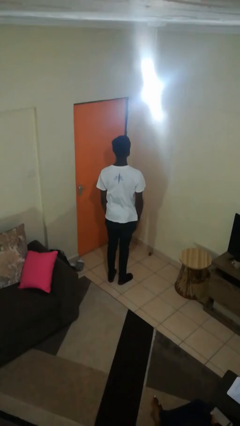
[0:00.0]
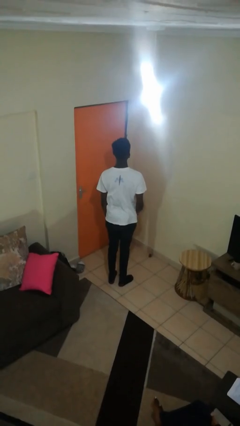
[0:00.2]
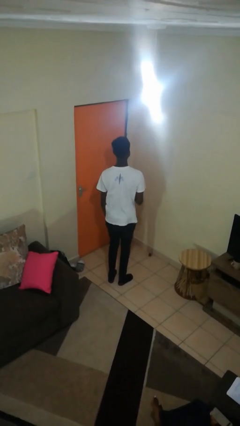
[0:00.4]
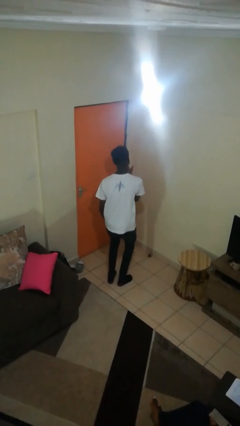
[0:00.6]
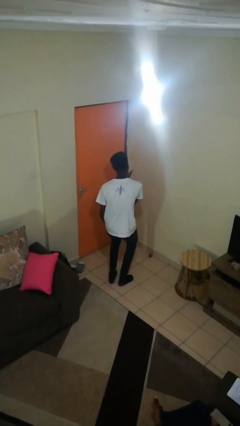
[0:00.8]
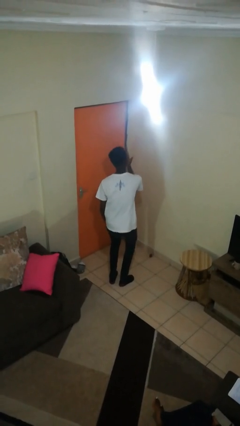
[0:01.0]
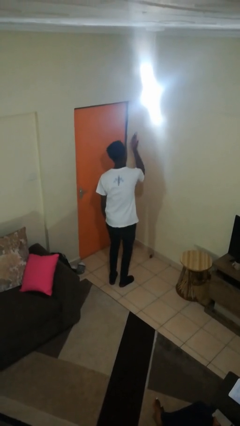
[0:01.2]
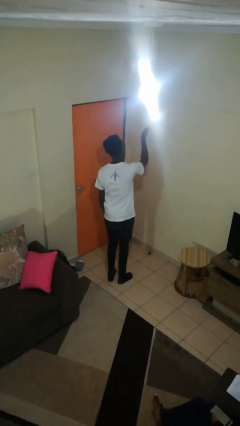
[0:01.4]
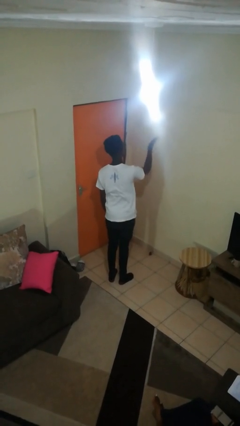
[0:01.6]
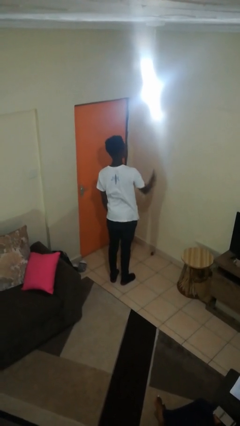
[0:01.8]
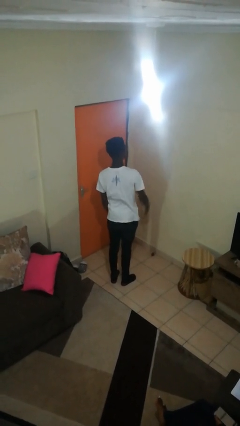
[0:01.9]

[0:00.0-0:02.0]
person gestures blow kiss

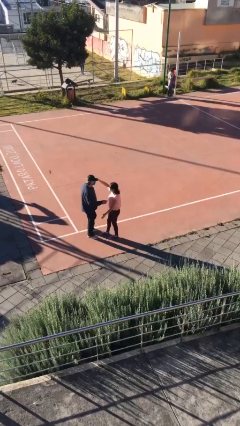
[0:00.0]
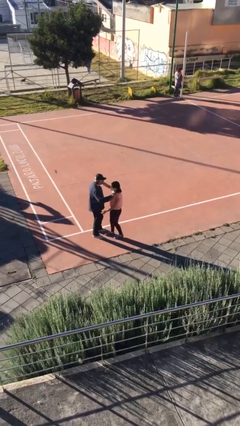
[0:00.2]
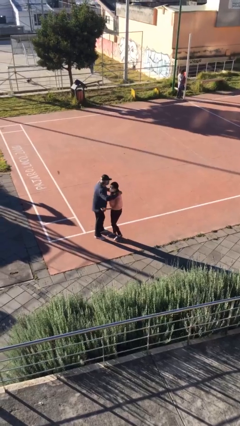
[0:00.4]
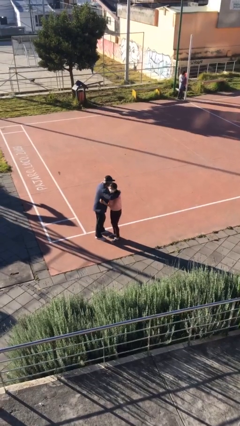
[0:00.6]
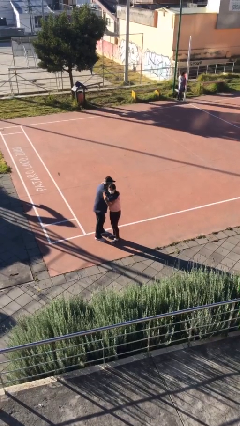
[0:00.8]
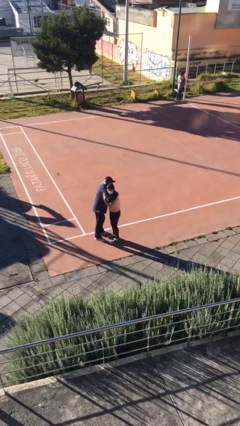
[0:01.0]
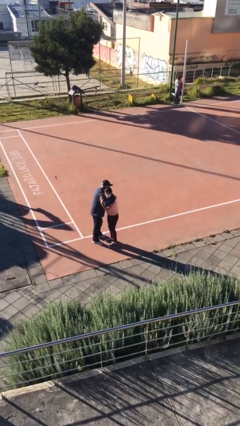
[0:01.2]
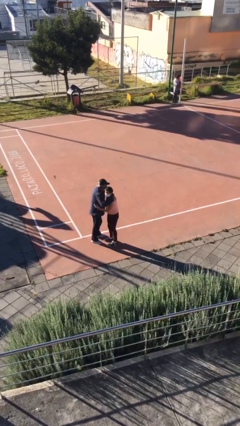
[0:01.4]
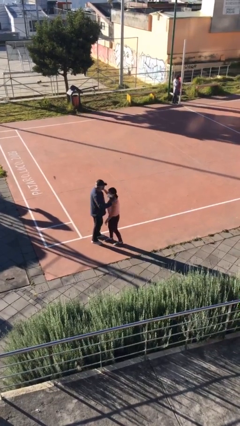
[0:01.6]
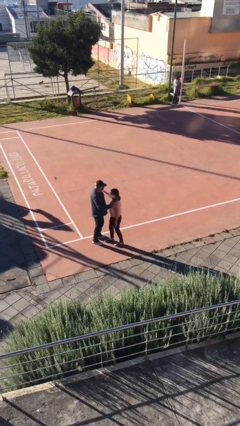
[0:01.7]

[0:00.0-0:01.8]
person embraces person

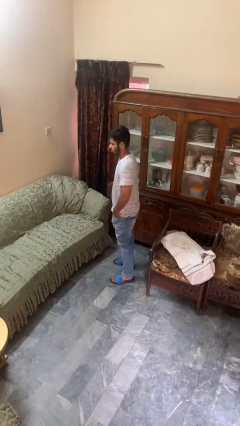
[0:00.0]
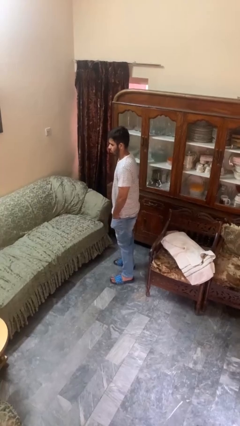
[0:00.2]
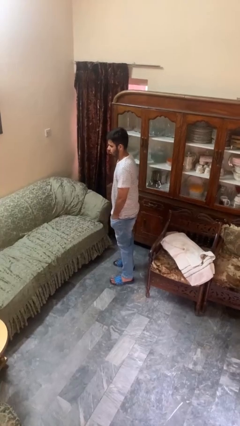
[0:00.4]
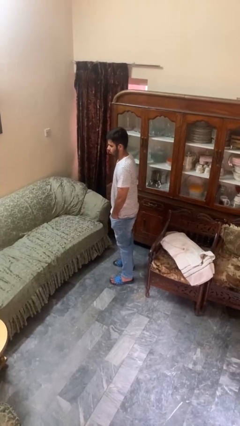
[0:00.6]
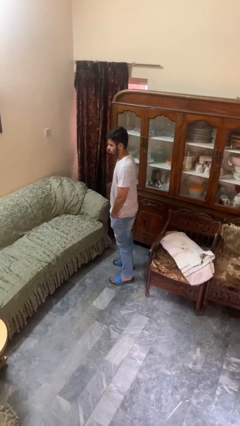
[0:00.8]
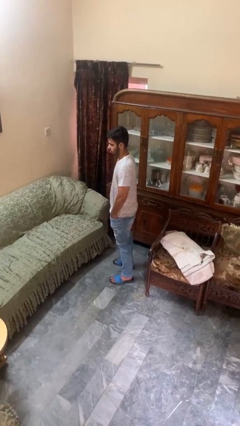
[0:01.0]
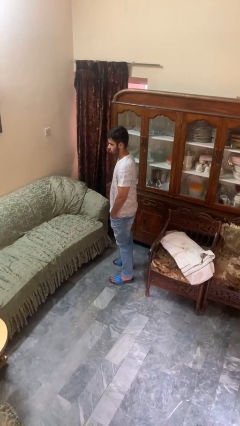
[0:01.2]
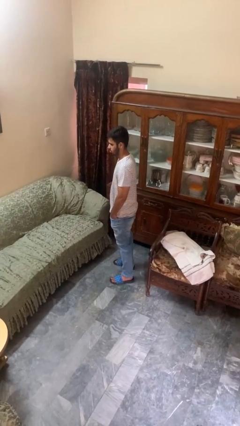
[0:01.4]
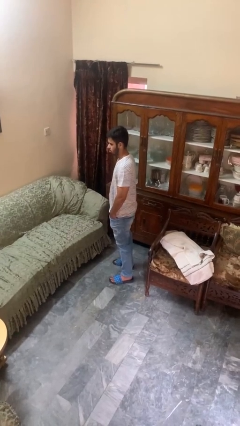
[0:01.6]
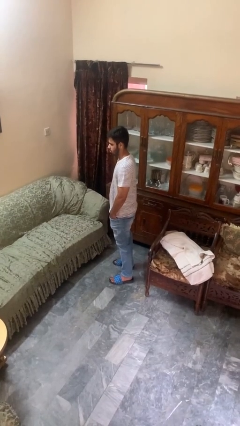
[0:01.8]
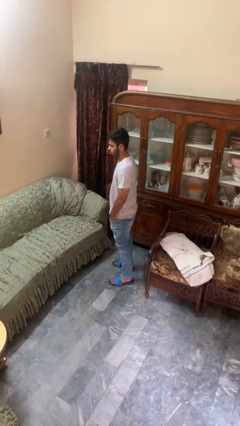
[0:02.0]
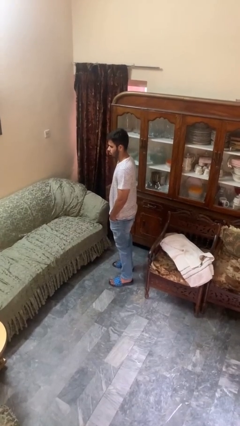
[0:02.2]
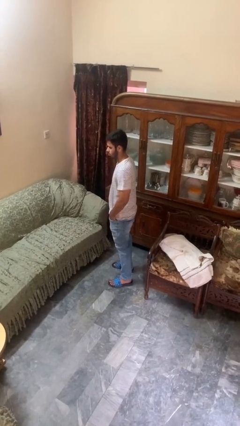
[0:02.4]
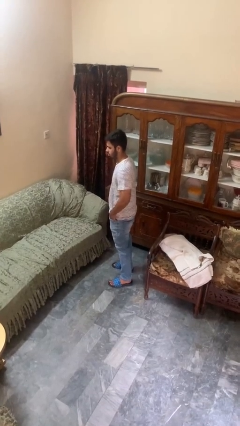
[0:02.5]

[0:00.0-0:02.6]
person puts hands in back pockets

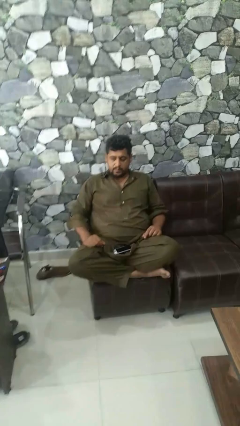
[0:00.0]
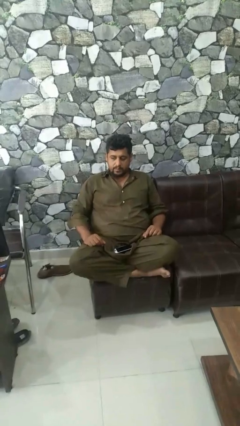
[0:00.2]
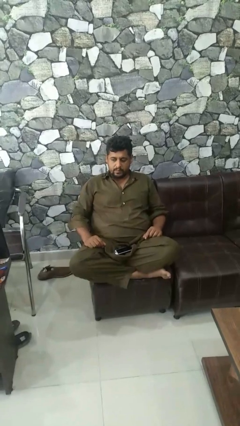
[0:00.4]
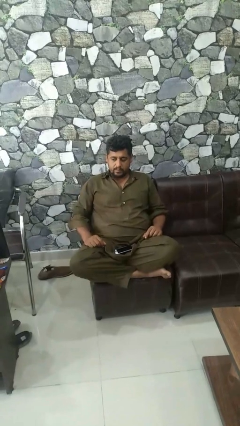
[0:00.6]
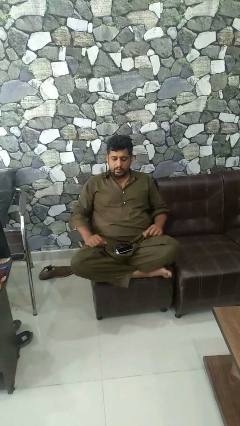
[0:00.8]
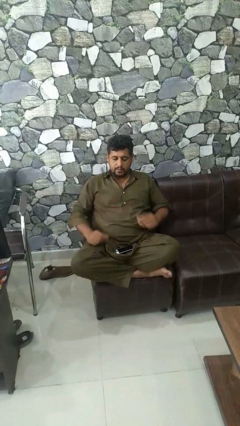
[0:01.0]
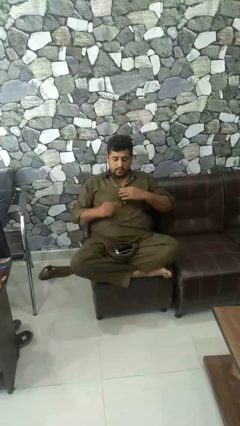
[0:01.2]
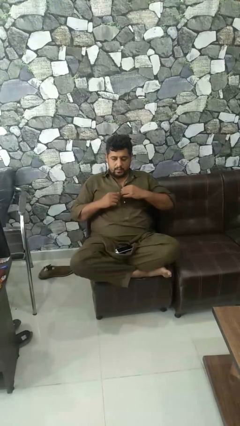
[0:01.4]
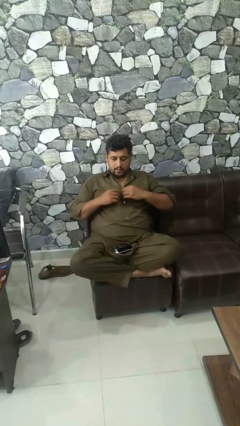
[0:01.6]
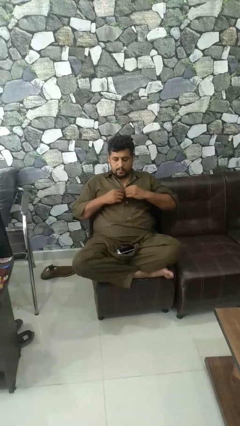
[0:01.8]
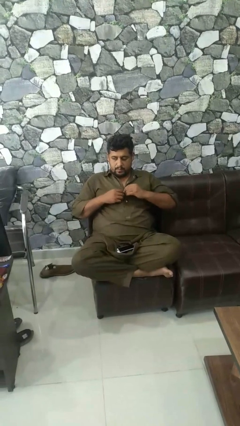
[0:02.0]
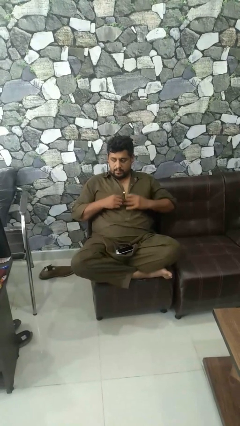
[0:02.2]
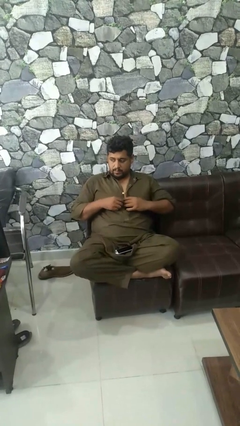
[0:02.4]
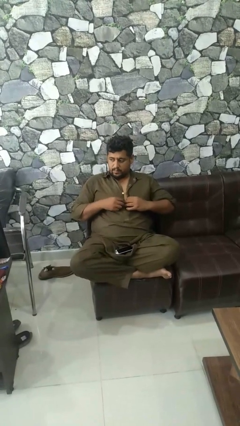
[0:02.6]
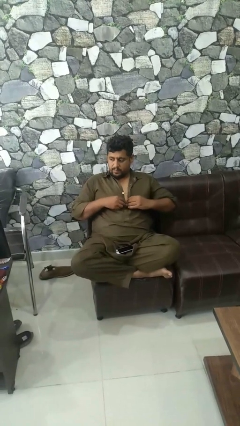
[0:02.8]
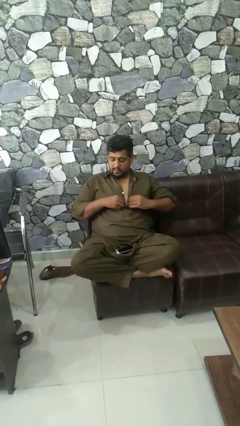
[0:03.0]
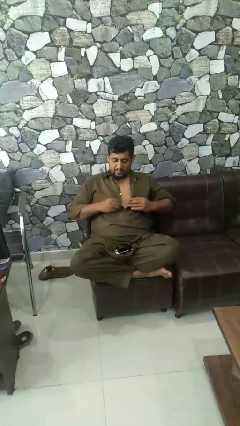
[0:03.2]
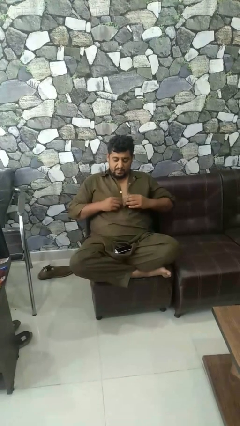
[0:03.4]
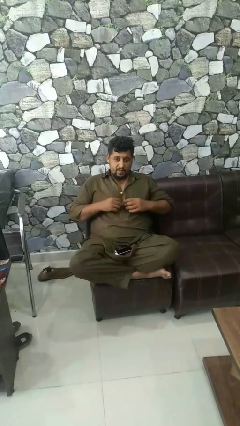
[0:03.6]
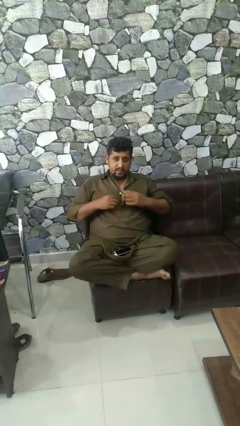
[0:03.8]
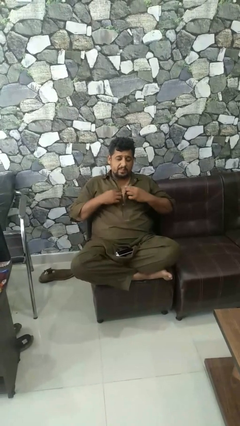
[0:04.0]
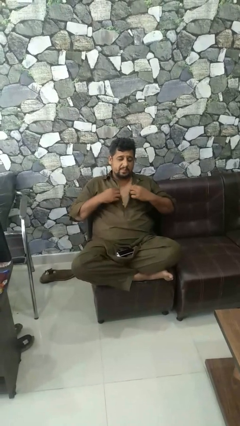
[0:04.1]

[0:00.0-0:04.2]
person unbuttons shirt

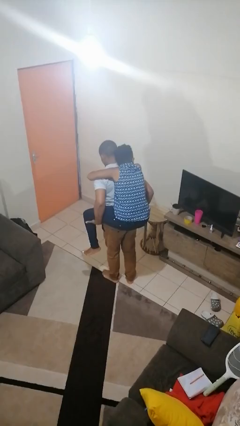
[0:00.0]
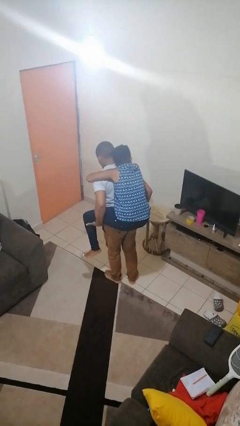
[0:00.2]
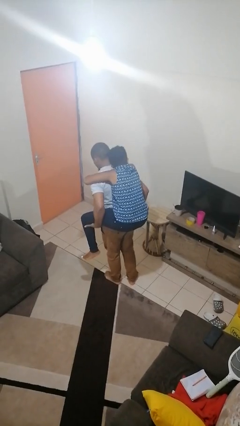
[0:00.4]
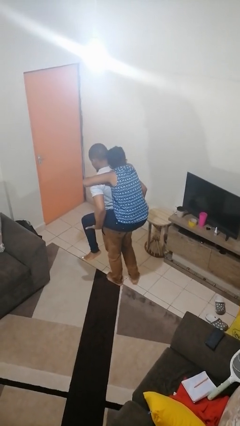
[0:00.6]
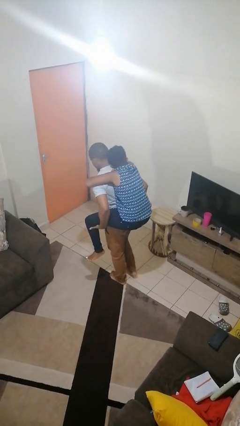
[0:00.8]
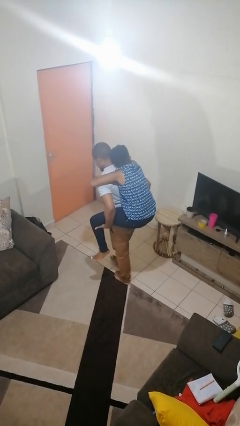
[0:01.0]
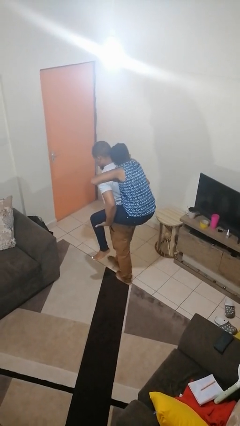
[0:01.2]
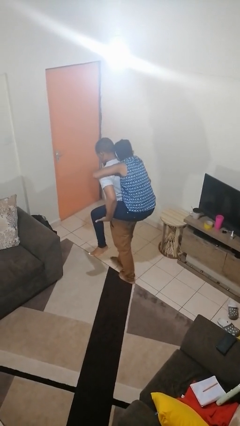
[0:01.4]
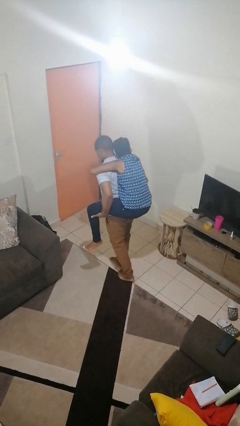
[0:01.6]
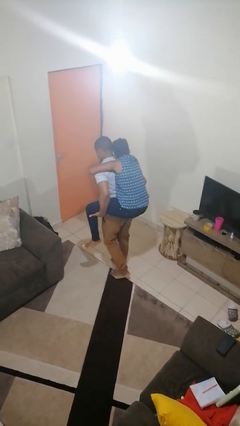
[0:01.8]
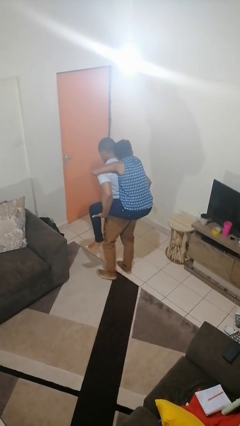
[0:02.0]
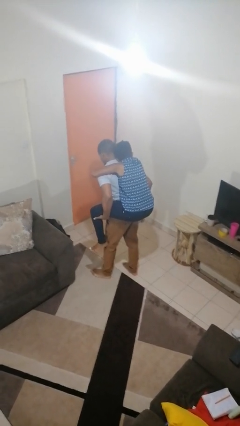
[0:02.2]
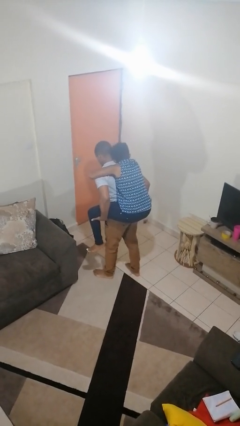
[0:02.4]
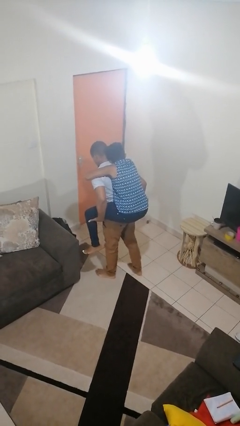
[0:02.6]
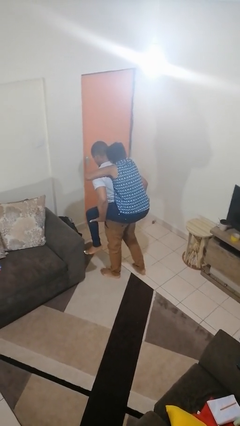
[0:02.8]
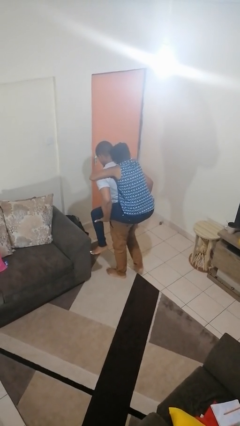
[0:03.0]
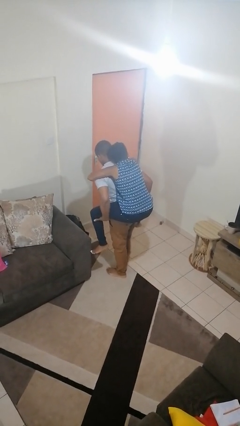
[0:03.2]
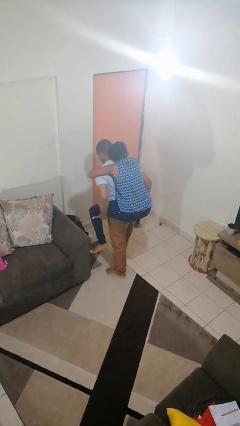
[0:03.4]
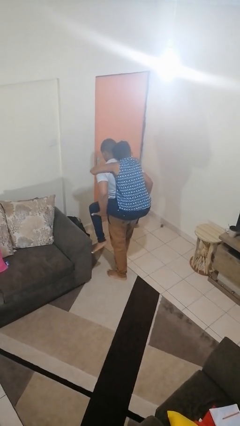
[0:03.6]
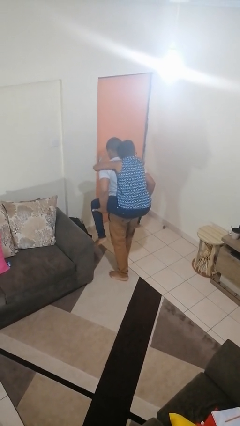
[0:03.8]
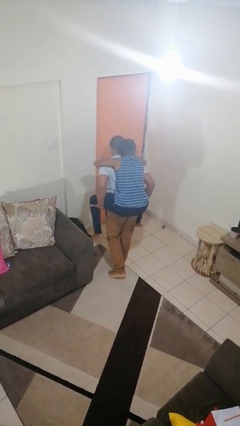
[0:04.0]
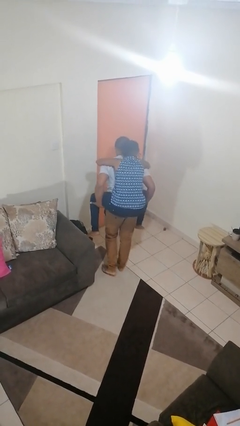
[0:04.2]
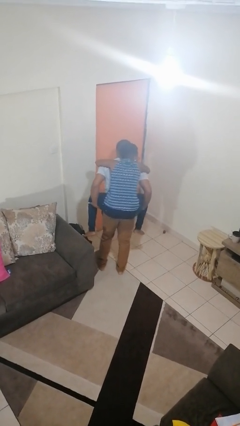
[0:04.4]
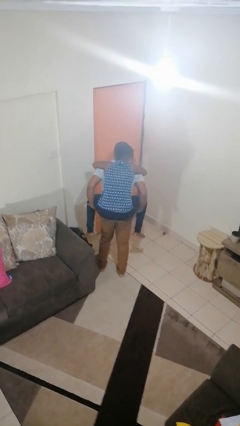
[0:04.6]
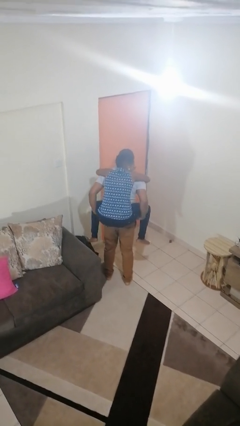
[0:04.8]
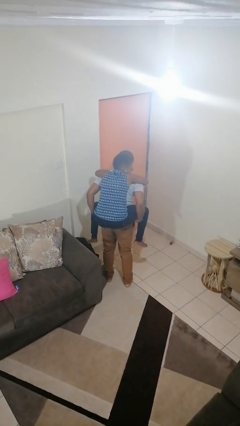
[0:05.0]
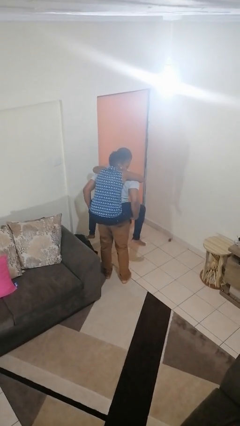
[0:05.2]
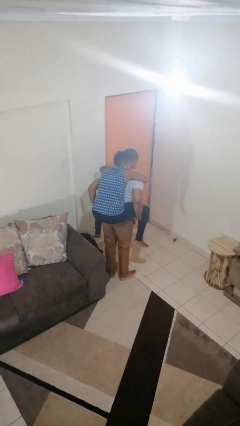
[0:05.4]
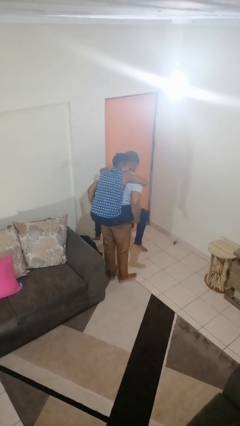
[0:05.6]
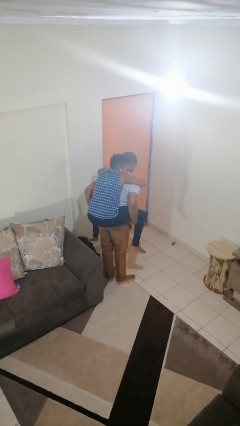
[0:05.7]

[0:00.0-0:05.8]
person carries person on back

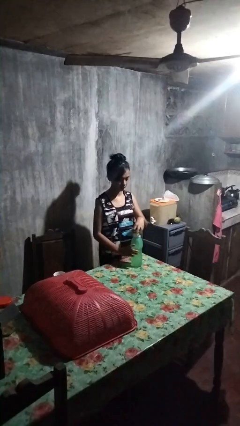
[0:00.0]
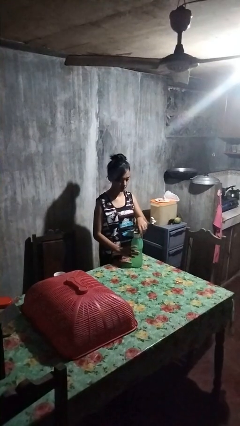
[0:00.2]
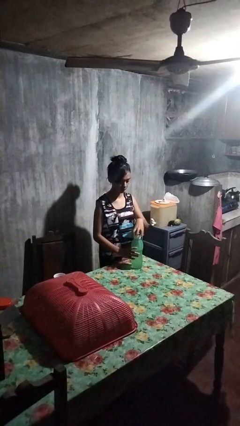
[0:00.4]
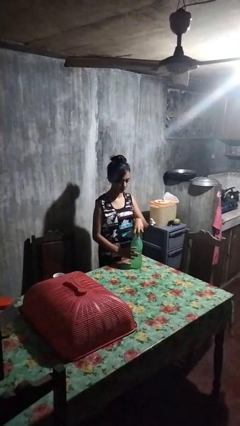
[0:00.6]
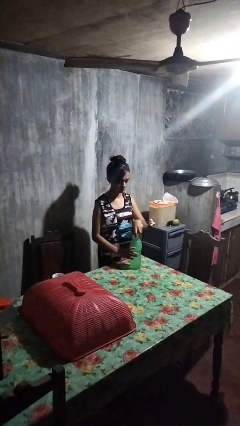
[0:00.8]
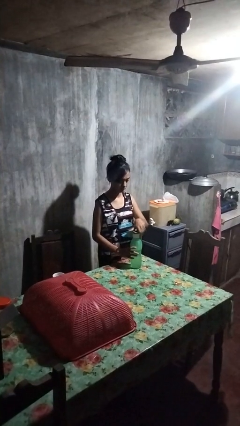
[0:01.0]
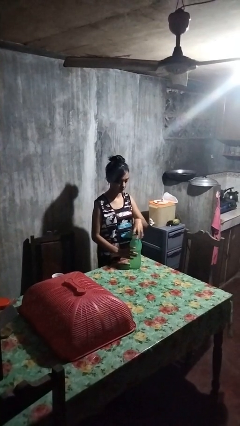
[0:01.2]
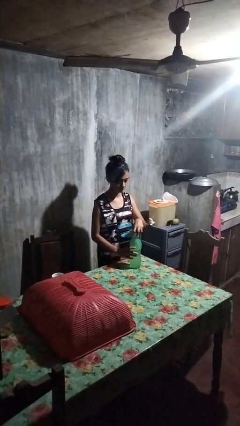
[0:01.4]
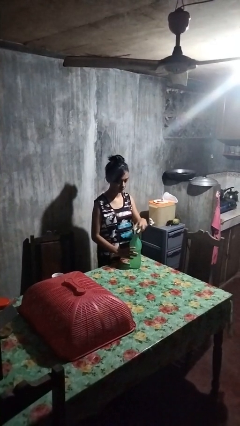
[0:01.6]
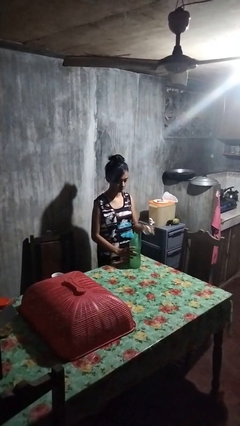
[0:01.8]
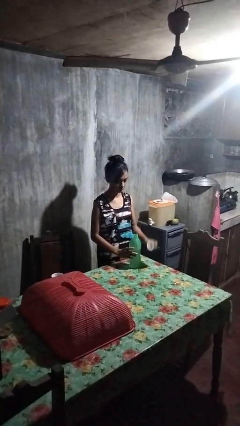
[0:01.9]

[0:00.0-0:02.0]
person unscrews lid from bottle
